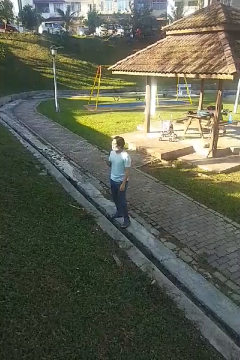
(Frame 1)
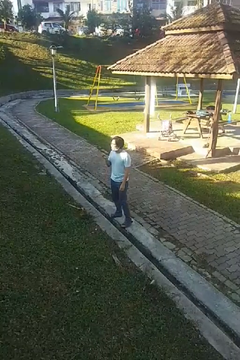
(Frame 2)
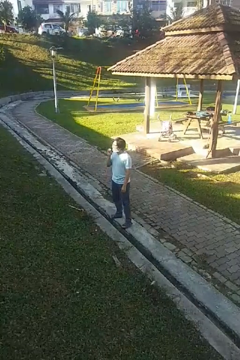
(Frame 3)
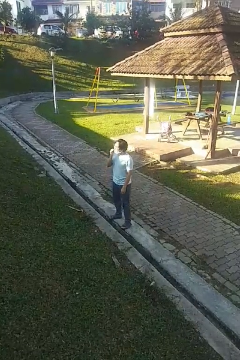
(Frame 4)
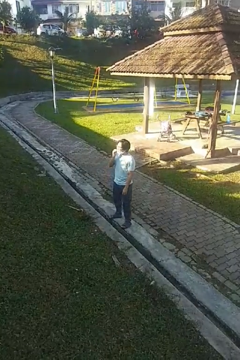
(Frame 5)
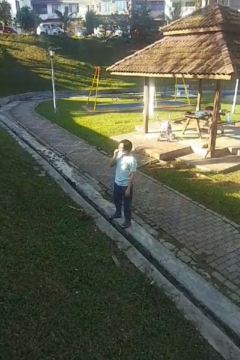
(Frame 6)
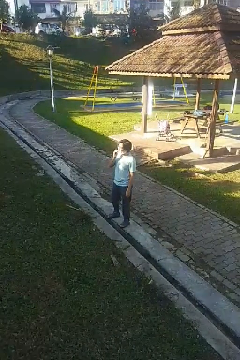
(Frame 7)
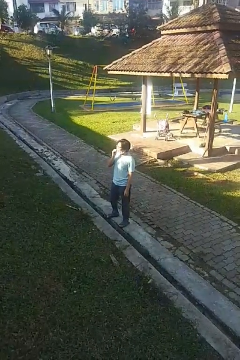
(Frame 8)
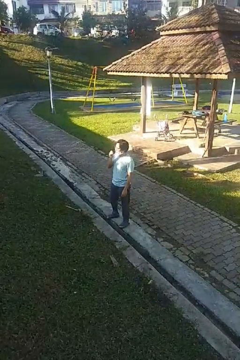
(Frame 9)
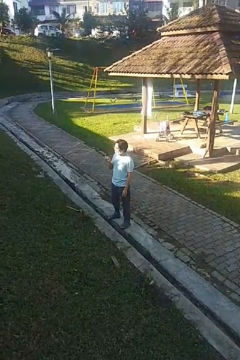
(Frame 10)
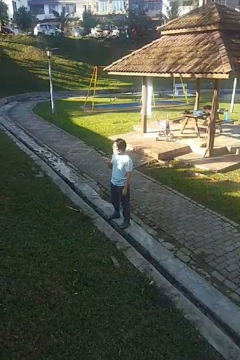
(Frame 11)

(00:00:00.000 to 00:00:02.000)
person flosses

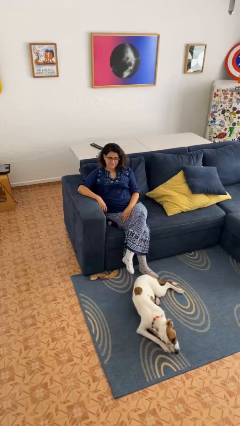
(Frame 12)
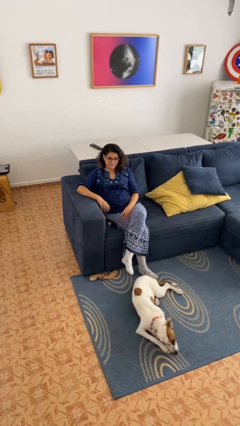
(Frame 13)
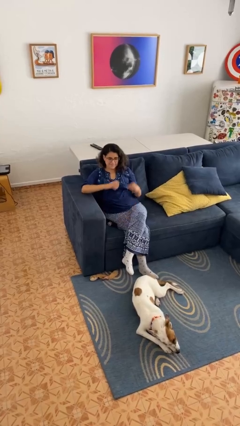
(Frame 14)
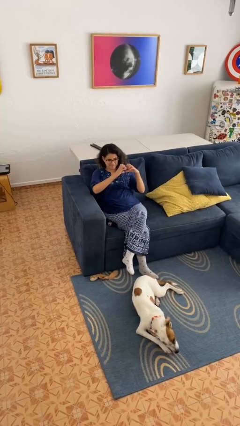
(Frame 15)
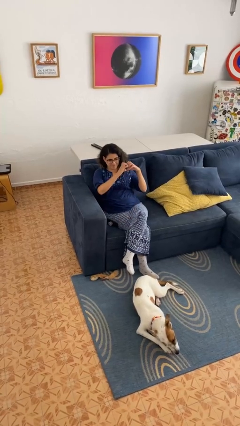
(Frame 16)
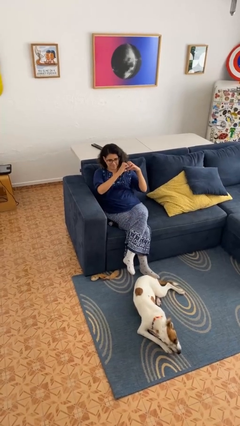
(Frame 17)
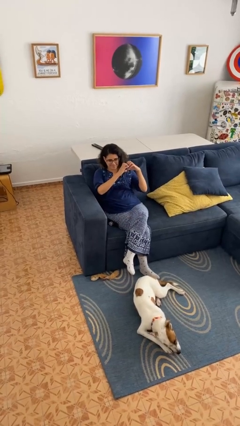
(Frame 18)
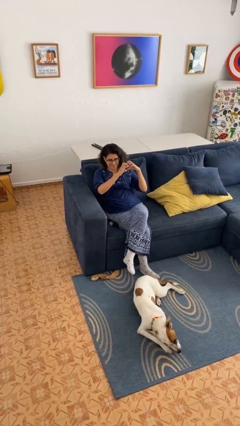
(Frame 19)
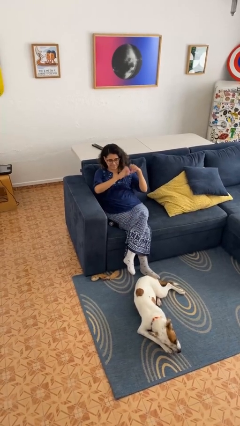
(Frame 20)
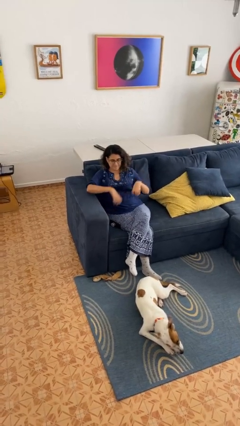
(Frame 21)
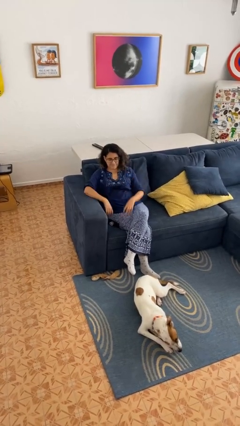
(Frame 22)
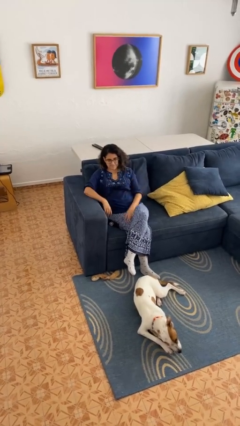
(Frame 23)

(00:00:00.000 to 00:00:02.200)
person gestures heart

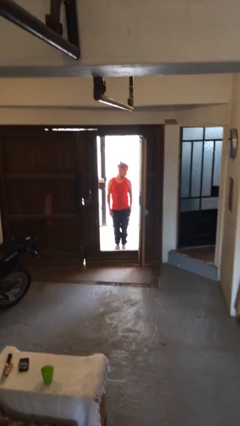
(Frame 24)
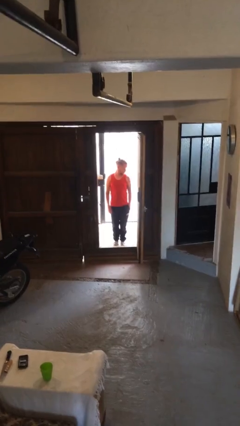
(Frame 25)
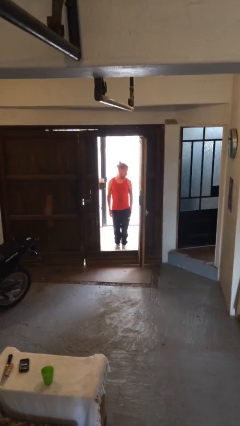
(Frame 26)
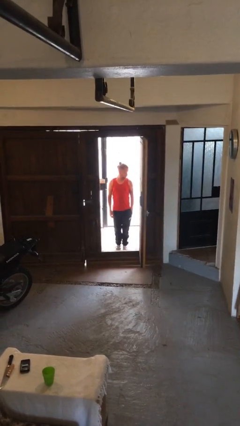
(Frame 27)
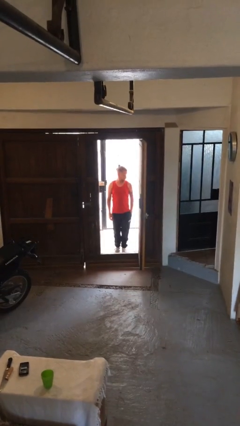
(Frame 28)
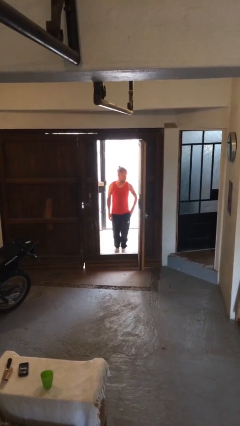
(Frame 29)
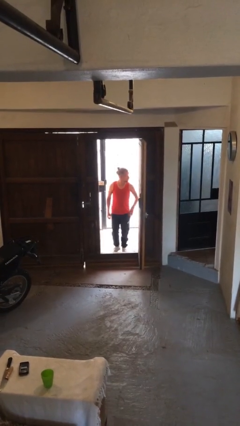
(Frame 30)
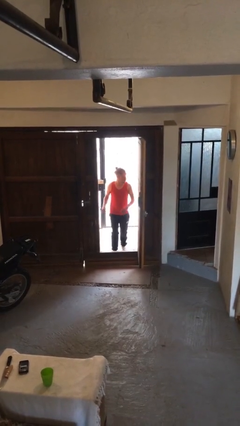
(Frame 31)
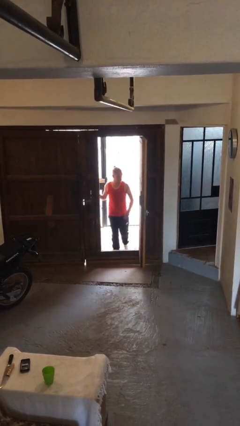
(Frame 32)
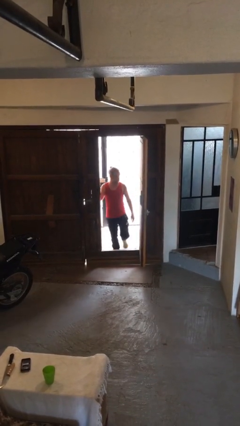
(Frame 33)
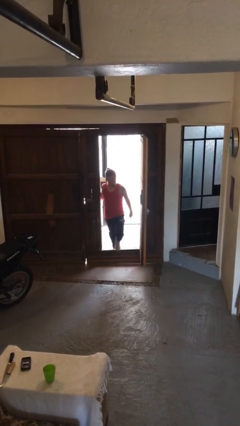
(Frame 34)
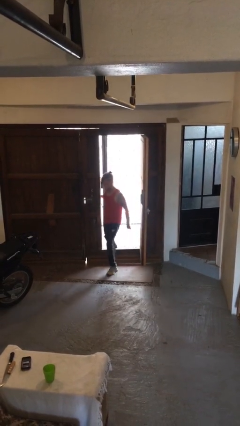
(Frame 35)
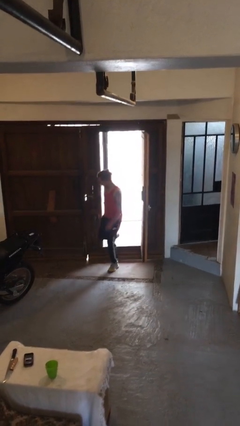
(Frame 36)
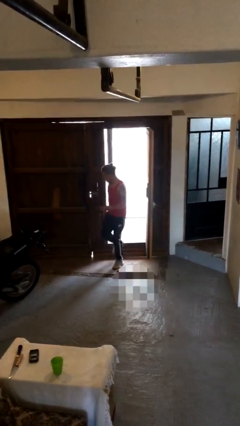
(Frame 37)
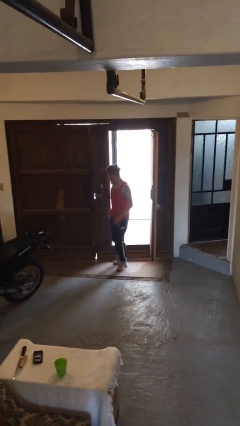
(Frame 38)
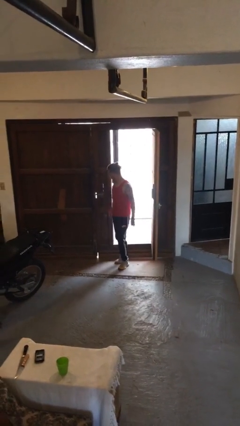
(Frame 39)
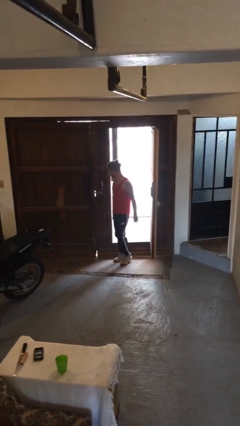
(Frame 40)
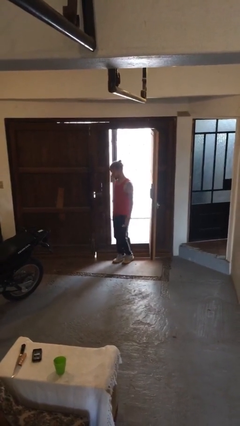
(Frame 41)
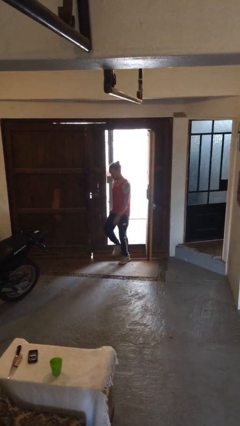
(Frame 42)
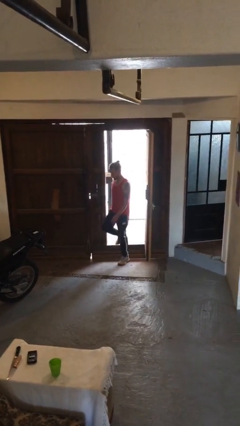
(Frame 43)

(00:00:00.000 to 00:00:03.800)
person bumps into wall

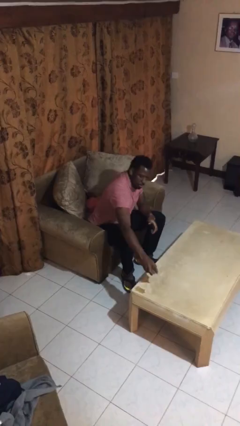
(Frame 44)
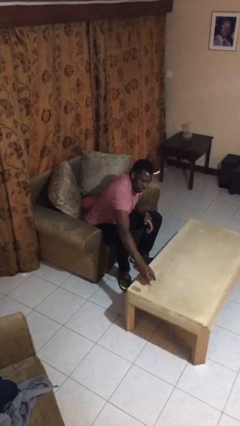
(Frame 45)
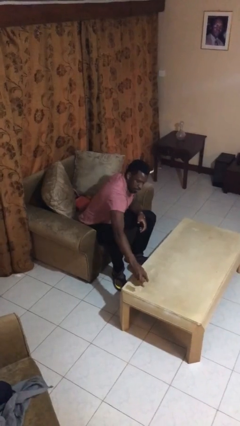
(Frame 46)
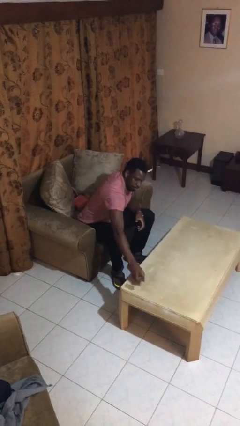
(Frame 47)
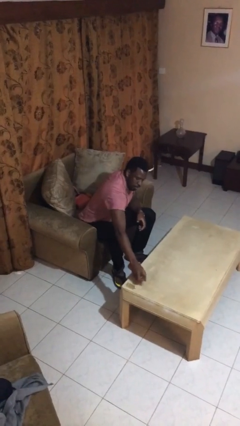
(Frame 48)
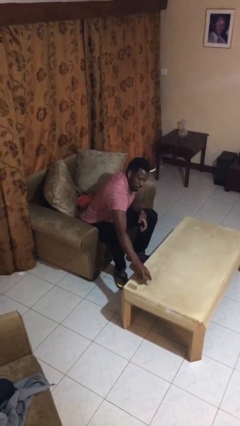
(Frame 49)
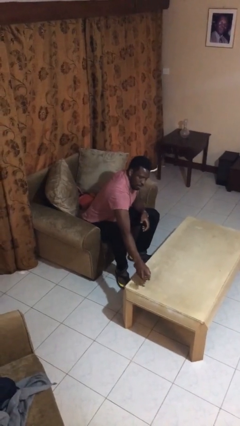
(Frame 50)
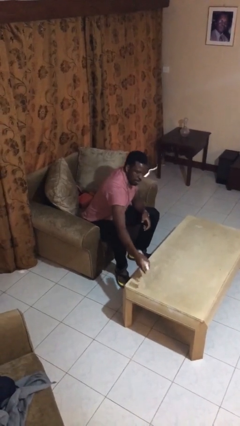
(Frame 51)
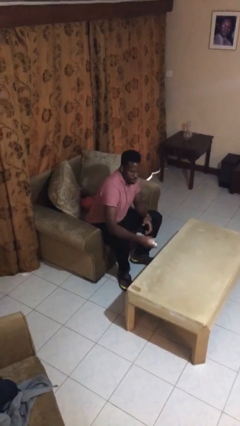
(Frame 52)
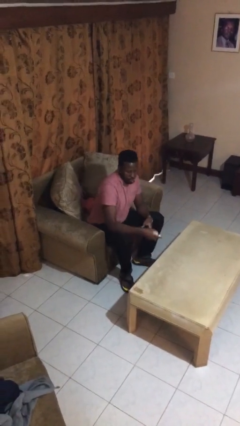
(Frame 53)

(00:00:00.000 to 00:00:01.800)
person sprays from bottle

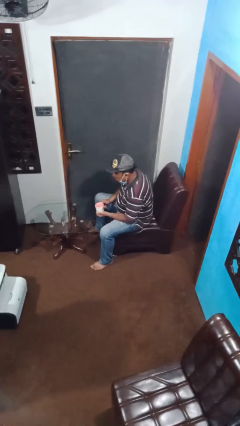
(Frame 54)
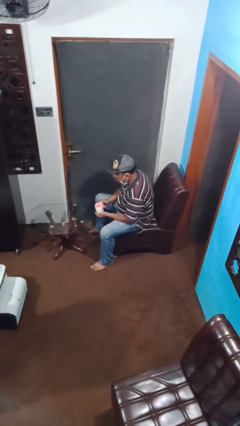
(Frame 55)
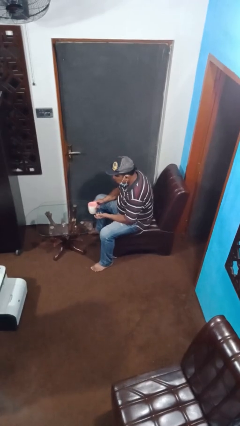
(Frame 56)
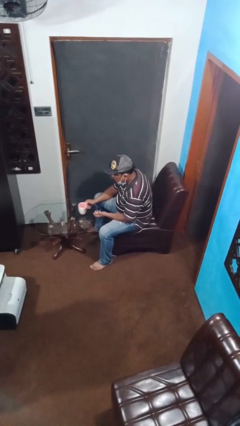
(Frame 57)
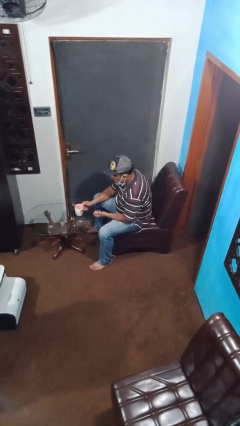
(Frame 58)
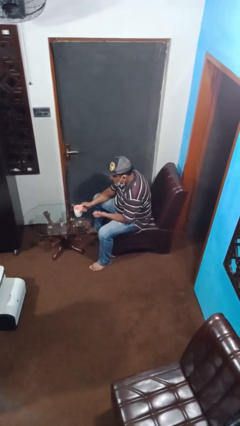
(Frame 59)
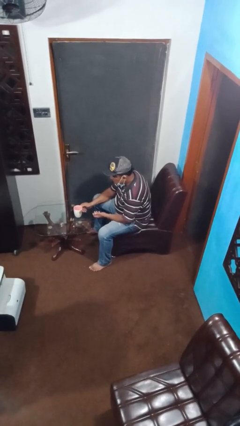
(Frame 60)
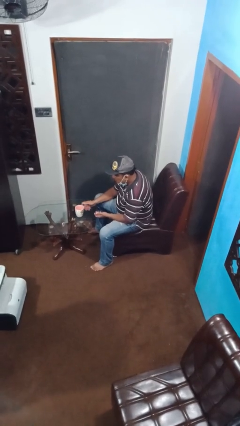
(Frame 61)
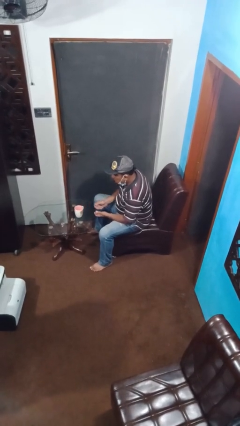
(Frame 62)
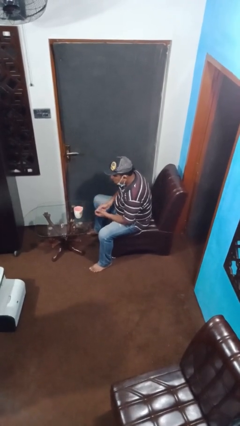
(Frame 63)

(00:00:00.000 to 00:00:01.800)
person puts down object on table

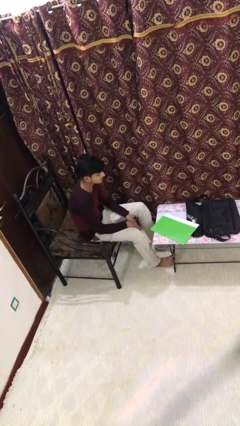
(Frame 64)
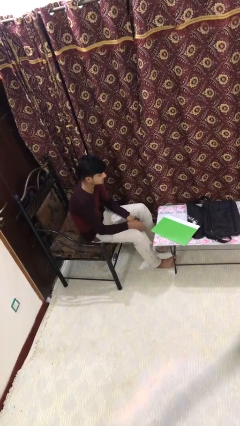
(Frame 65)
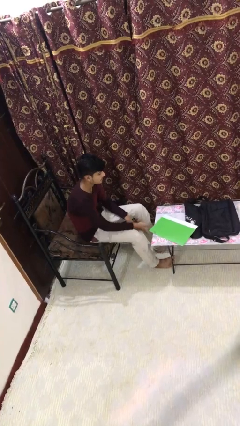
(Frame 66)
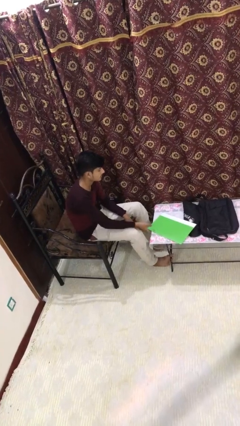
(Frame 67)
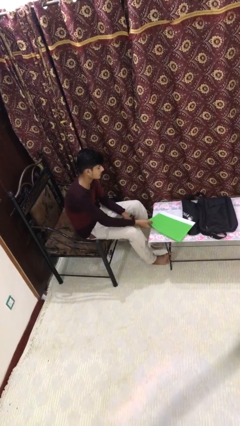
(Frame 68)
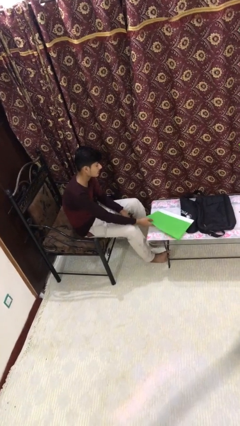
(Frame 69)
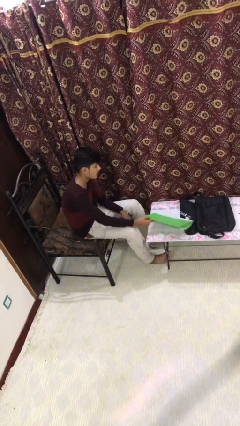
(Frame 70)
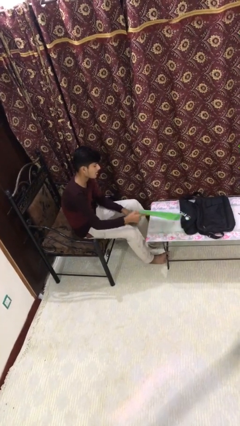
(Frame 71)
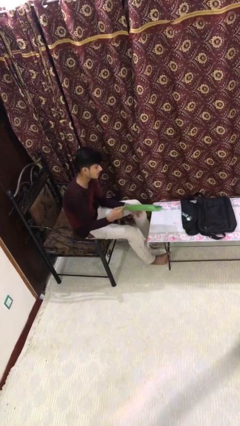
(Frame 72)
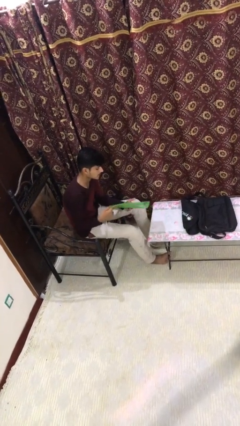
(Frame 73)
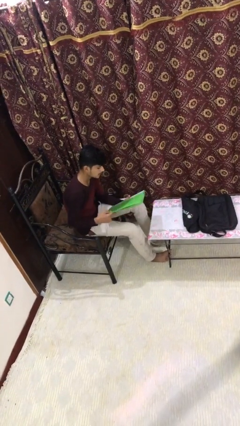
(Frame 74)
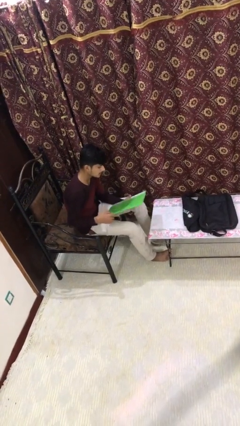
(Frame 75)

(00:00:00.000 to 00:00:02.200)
person picks up object from table

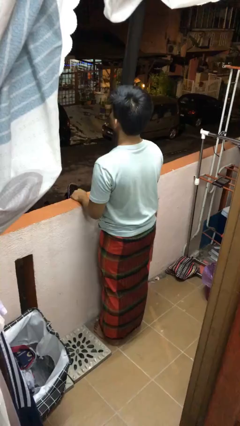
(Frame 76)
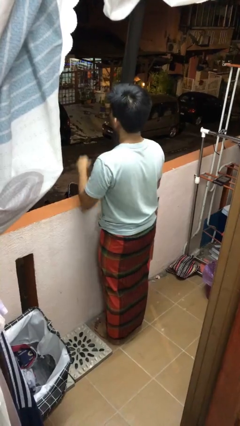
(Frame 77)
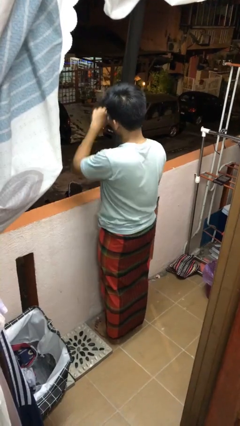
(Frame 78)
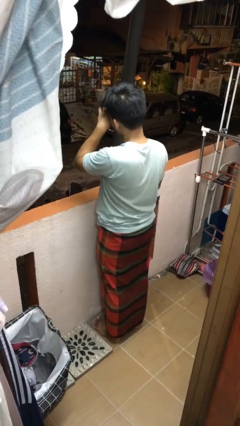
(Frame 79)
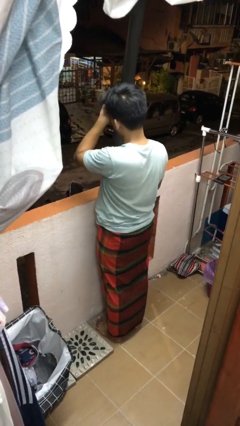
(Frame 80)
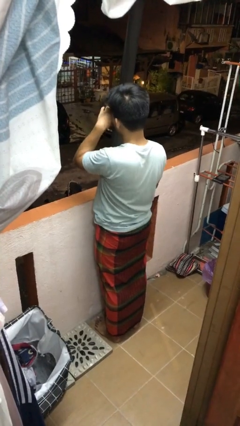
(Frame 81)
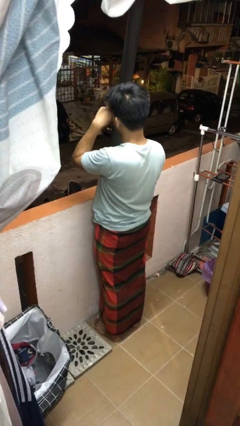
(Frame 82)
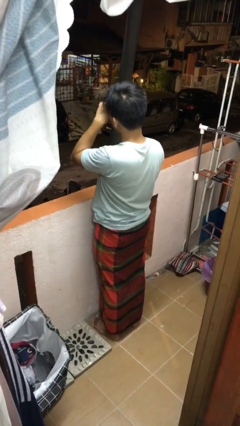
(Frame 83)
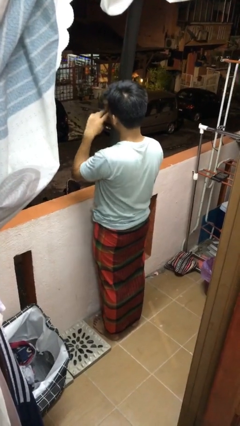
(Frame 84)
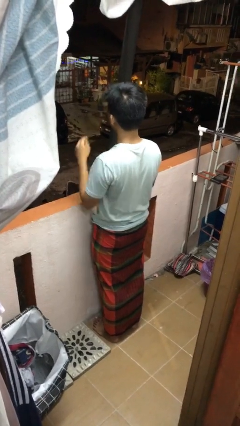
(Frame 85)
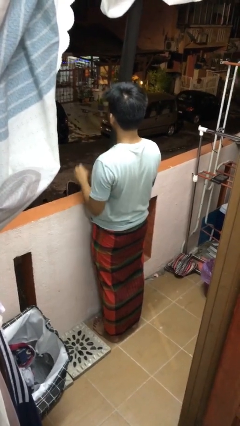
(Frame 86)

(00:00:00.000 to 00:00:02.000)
person rubs eyes

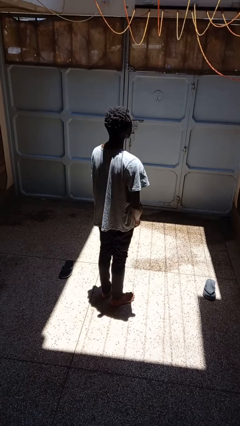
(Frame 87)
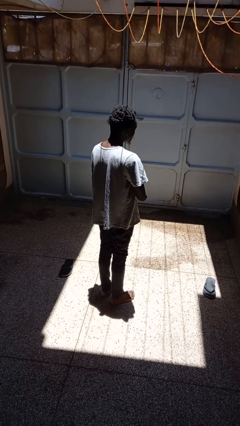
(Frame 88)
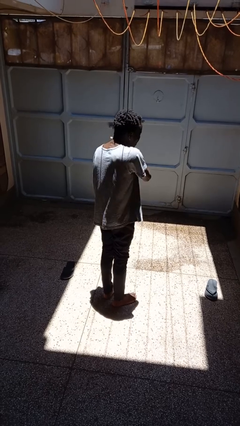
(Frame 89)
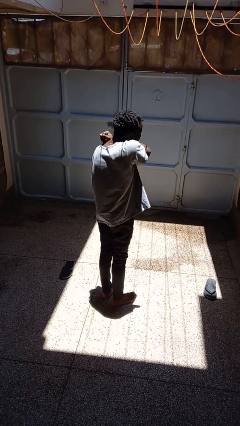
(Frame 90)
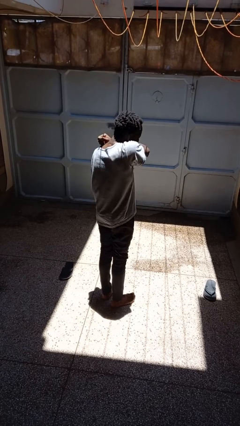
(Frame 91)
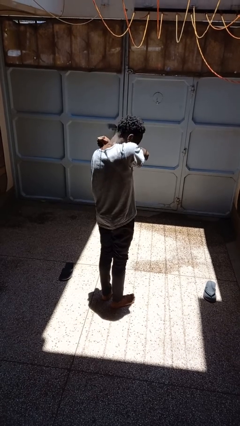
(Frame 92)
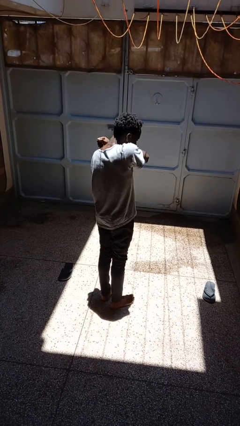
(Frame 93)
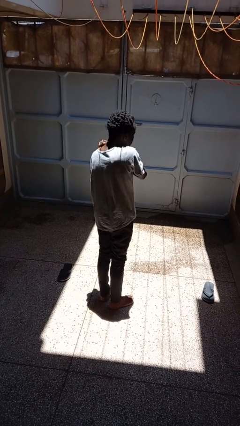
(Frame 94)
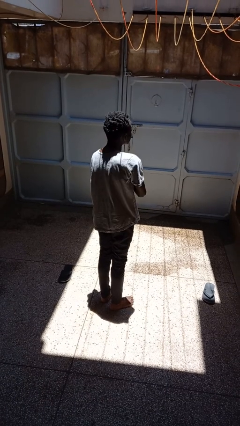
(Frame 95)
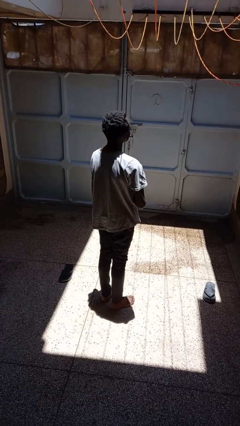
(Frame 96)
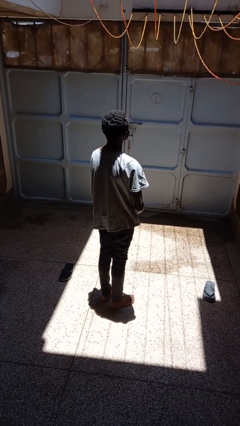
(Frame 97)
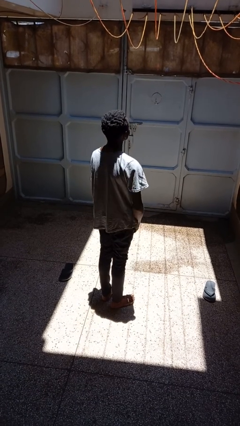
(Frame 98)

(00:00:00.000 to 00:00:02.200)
person sneezes into arm
